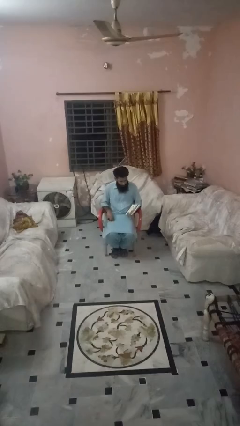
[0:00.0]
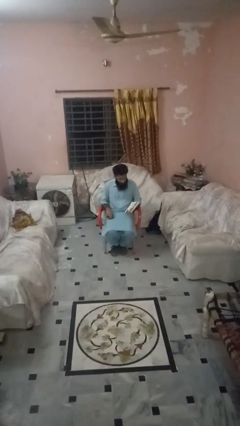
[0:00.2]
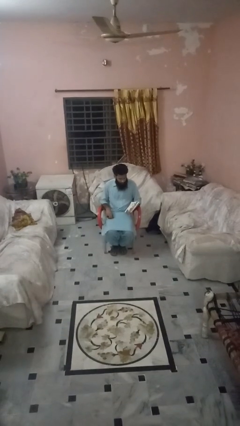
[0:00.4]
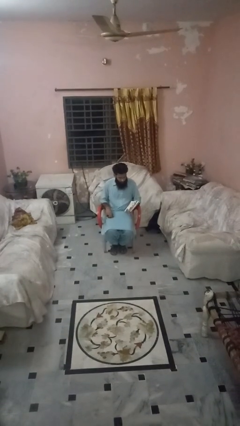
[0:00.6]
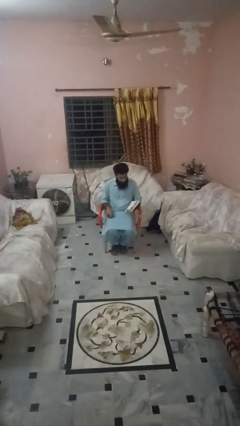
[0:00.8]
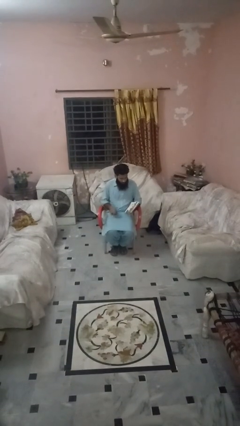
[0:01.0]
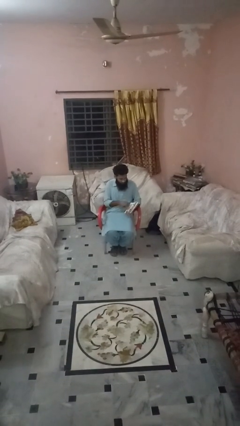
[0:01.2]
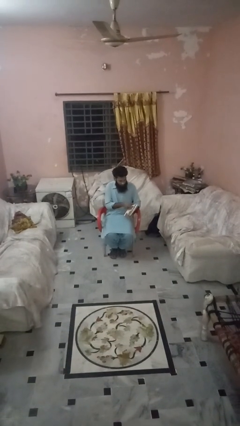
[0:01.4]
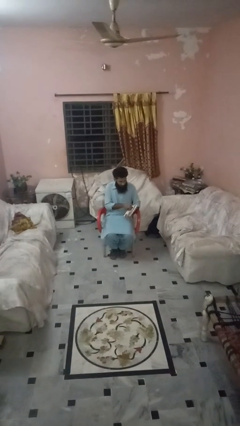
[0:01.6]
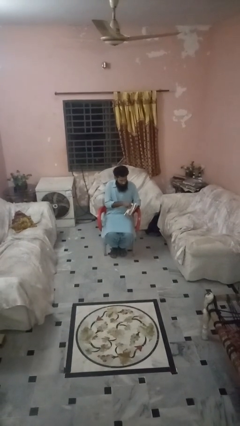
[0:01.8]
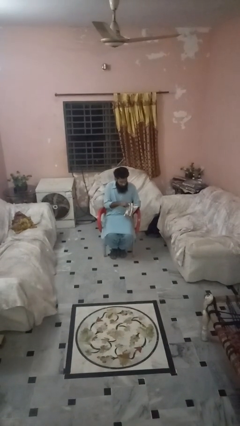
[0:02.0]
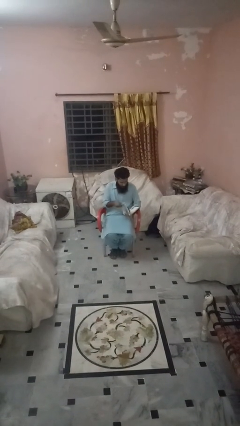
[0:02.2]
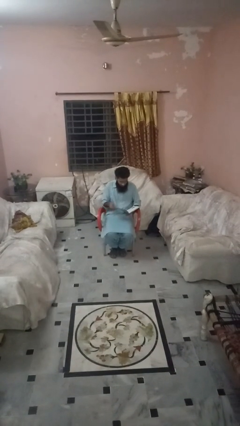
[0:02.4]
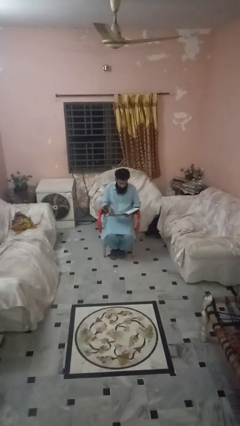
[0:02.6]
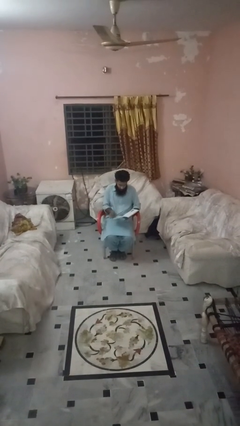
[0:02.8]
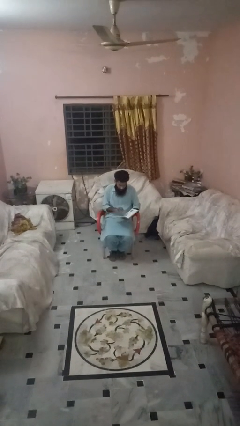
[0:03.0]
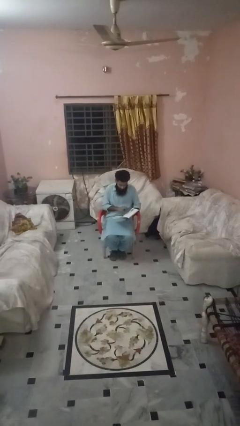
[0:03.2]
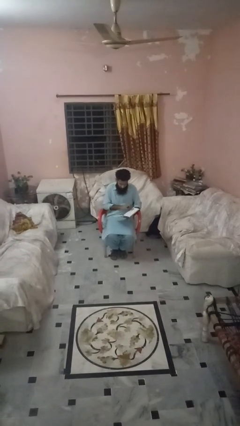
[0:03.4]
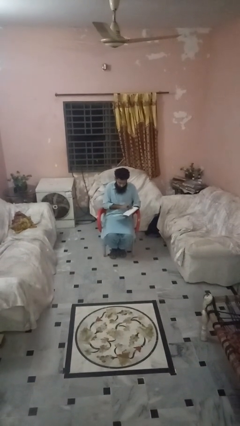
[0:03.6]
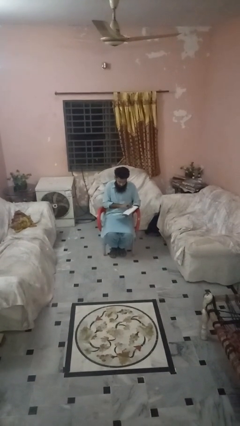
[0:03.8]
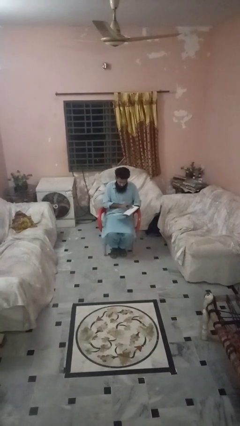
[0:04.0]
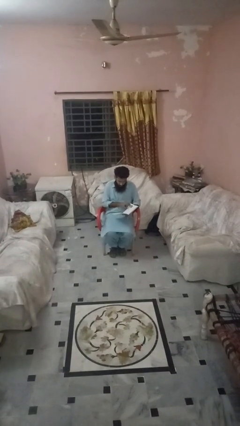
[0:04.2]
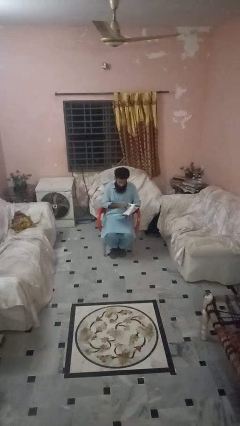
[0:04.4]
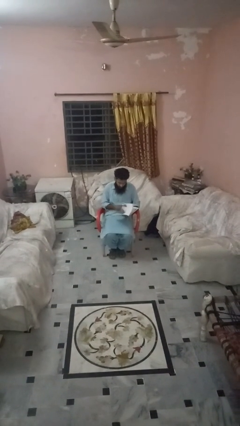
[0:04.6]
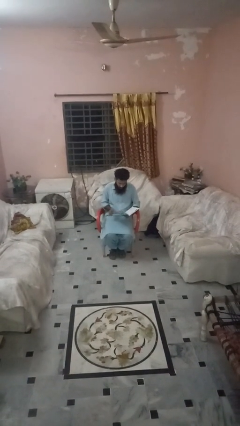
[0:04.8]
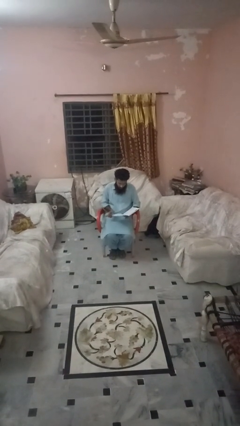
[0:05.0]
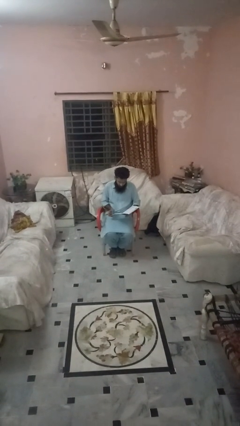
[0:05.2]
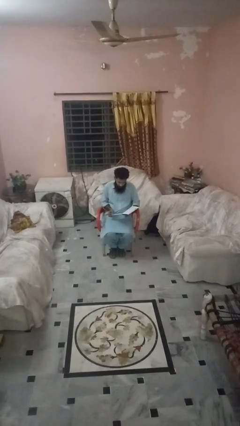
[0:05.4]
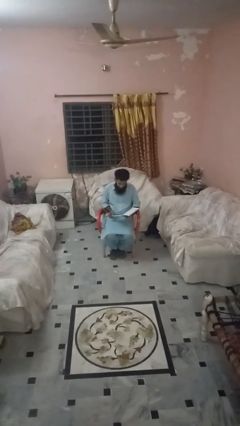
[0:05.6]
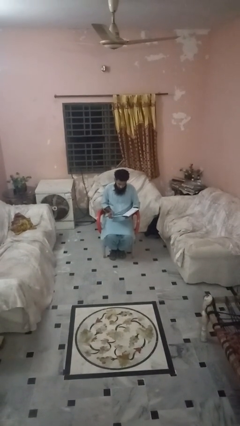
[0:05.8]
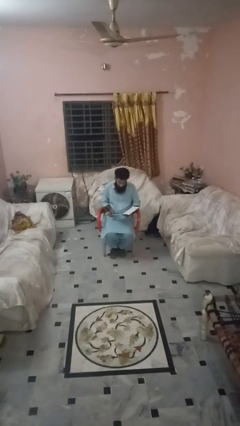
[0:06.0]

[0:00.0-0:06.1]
person reads magazine

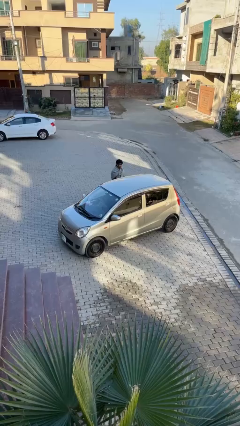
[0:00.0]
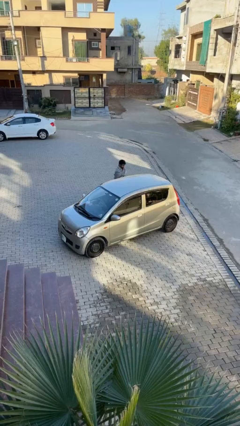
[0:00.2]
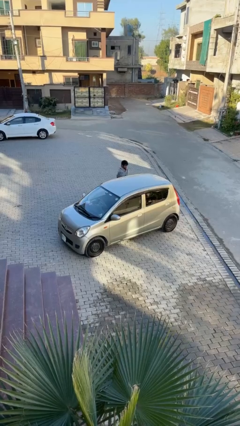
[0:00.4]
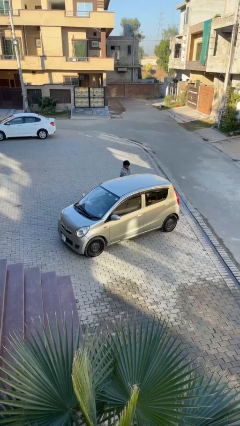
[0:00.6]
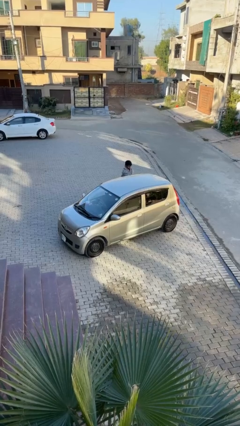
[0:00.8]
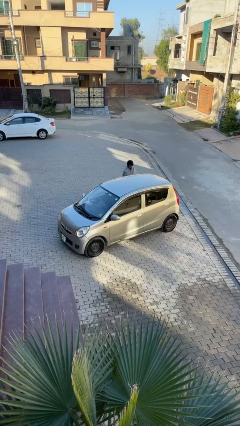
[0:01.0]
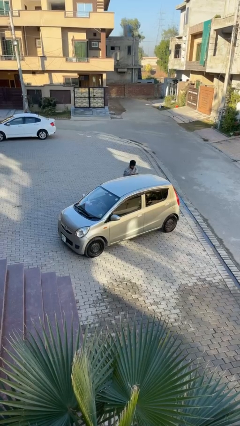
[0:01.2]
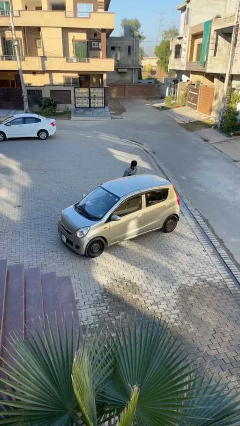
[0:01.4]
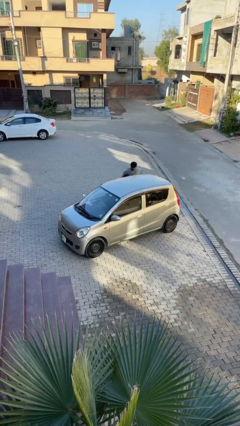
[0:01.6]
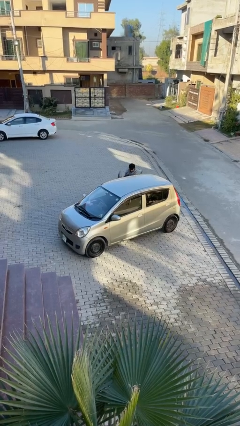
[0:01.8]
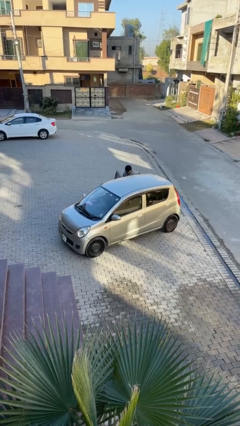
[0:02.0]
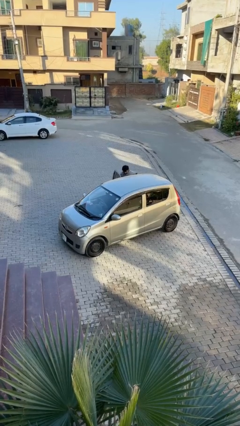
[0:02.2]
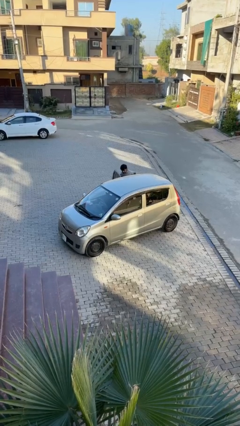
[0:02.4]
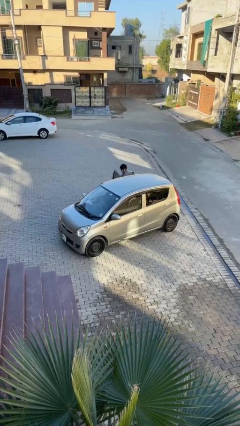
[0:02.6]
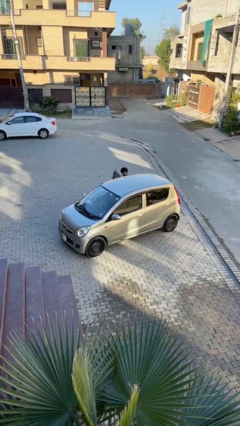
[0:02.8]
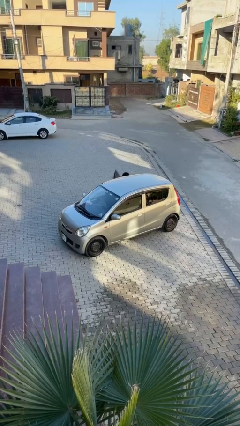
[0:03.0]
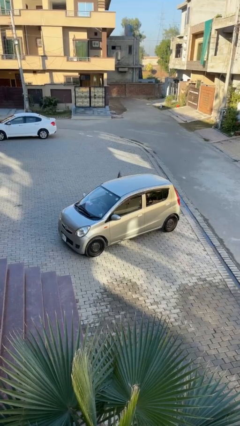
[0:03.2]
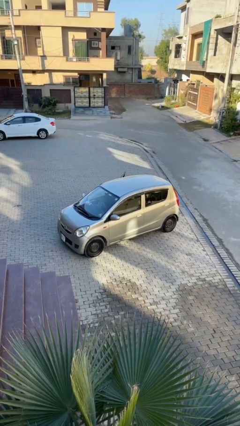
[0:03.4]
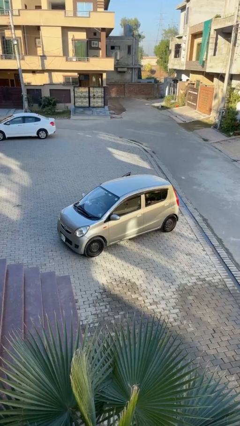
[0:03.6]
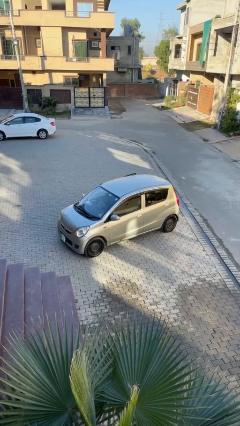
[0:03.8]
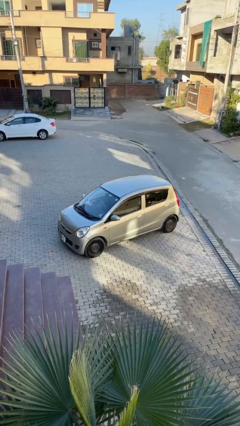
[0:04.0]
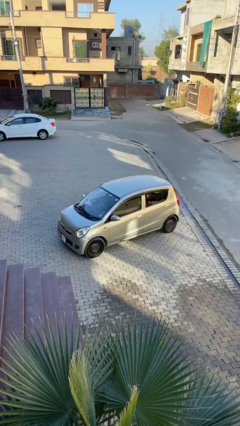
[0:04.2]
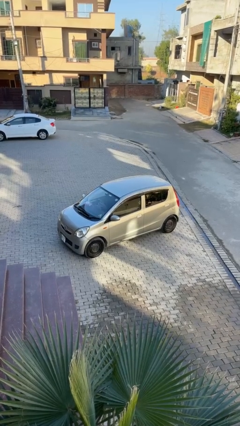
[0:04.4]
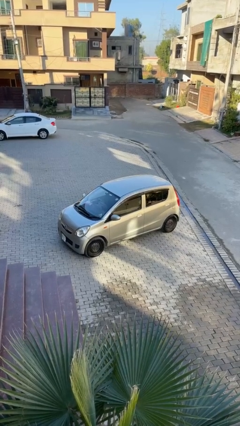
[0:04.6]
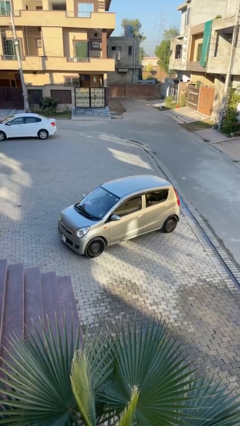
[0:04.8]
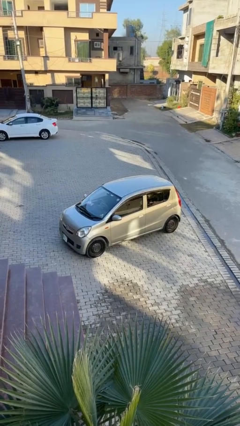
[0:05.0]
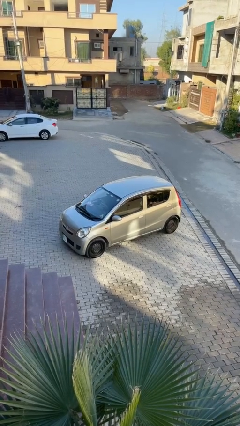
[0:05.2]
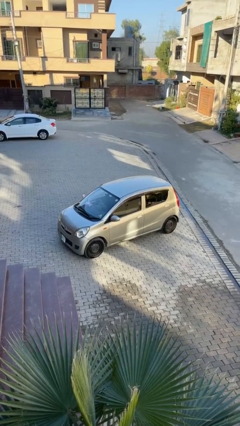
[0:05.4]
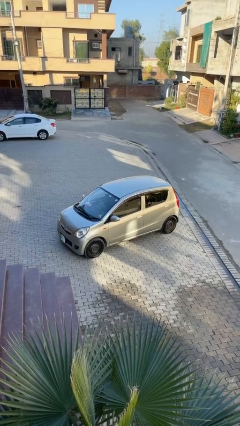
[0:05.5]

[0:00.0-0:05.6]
car picks up person

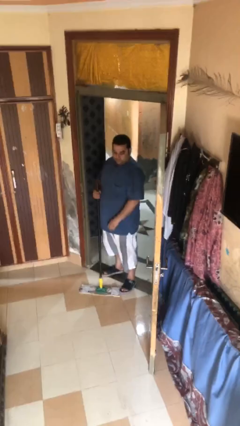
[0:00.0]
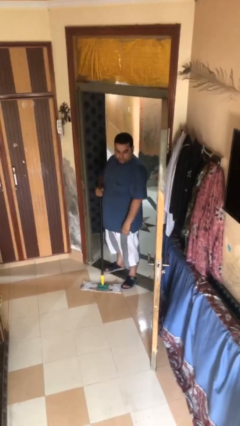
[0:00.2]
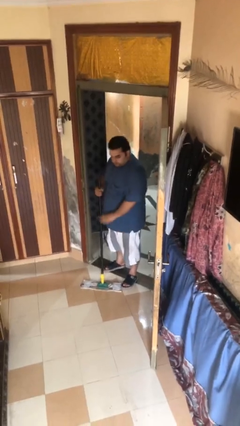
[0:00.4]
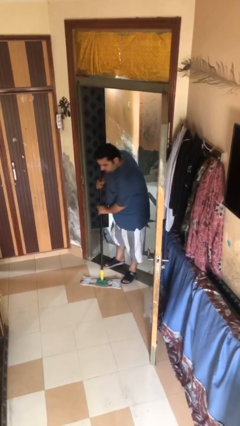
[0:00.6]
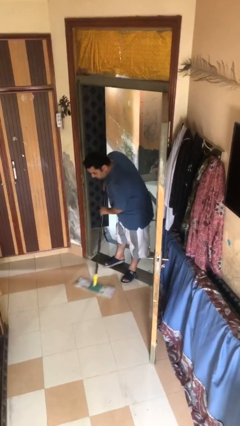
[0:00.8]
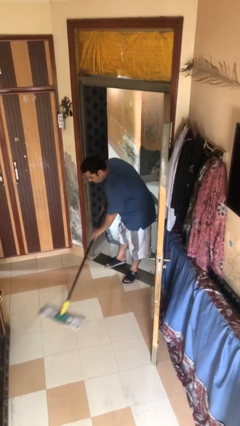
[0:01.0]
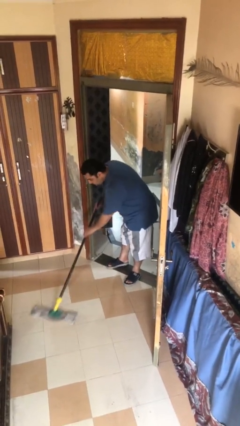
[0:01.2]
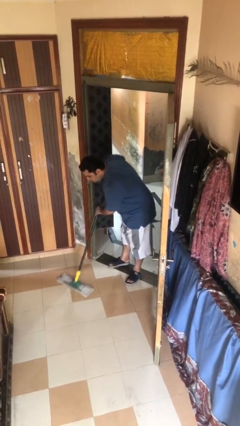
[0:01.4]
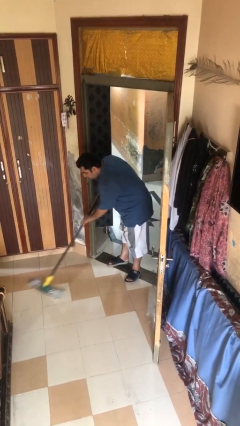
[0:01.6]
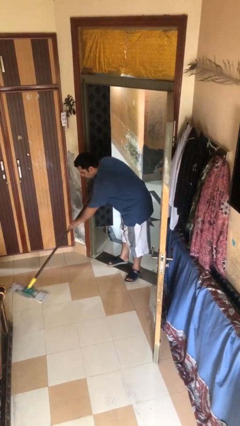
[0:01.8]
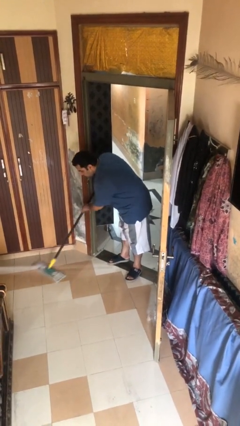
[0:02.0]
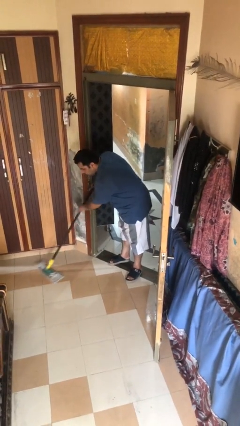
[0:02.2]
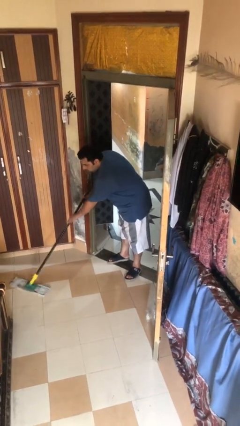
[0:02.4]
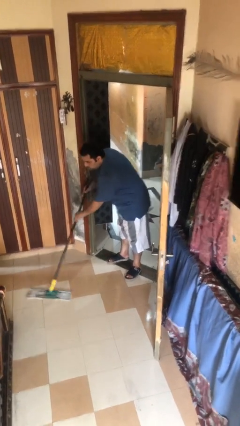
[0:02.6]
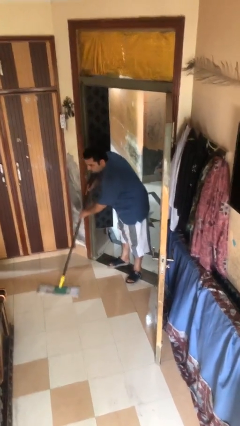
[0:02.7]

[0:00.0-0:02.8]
person mops

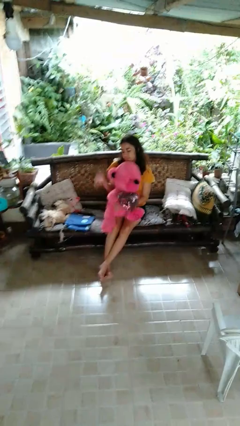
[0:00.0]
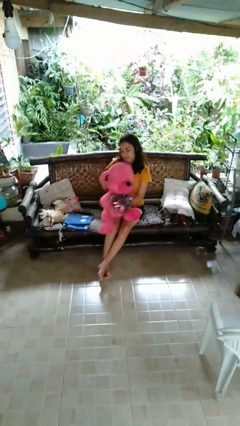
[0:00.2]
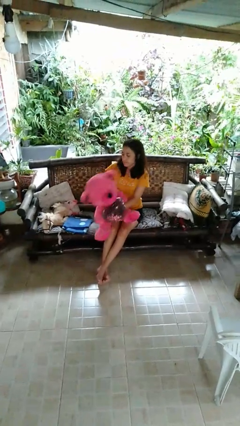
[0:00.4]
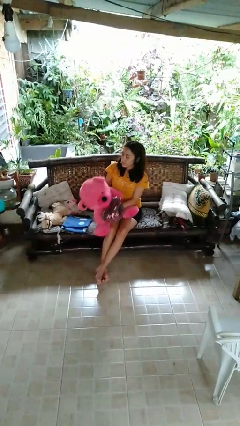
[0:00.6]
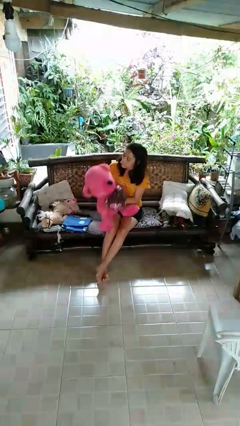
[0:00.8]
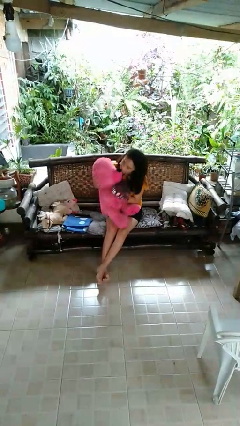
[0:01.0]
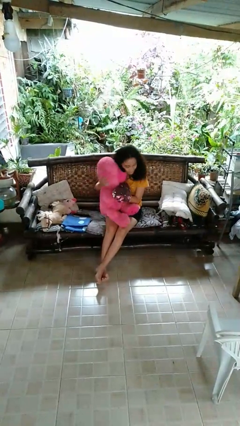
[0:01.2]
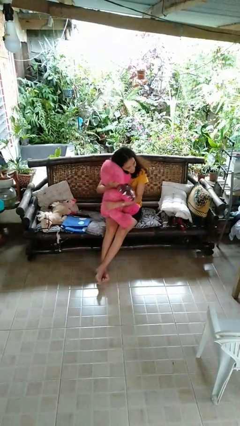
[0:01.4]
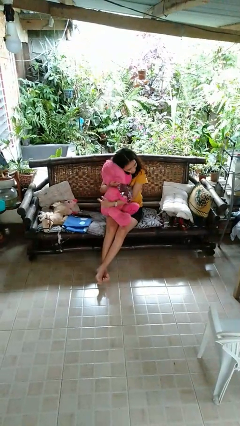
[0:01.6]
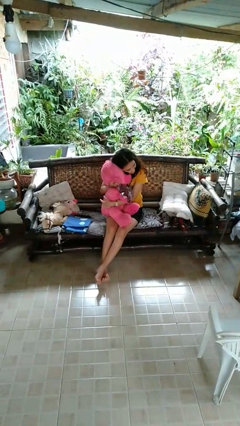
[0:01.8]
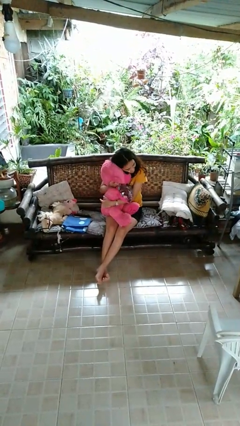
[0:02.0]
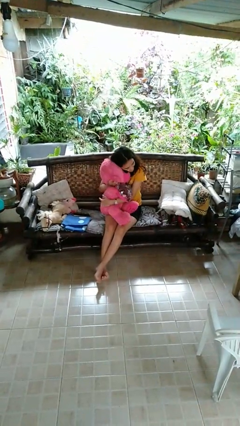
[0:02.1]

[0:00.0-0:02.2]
person hugs stuffed animal

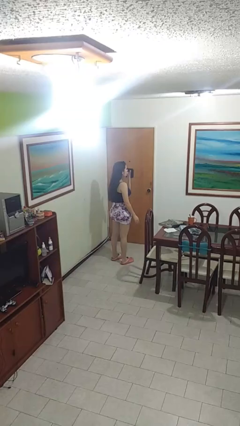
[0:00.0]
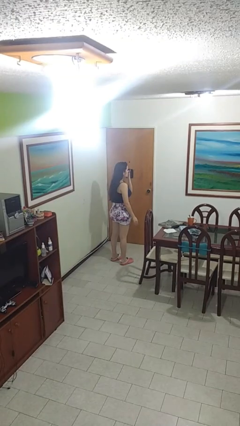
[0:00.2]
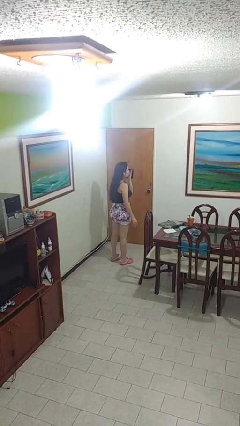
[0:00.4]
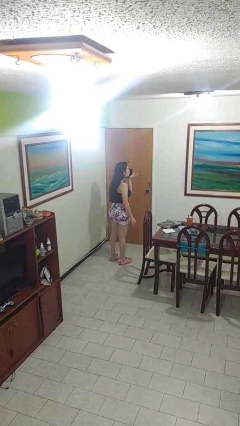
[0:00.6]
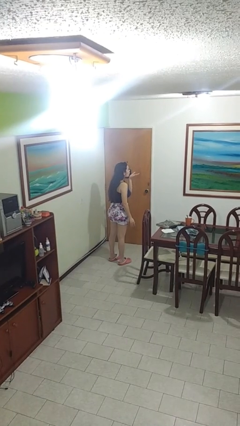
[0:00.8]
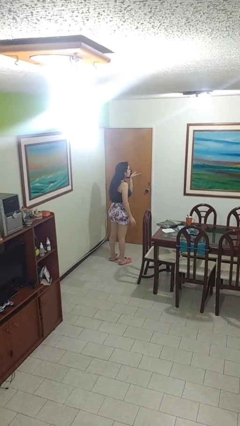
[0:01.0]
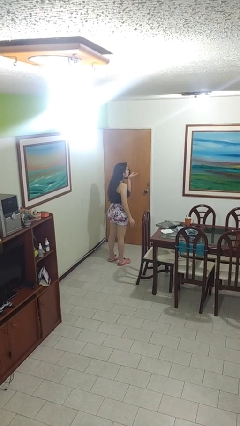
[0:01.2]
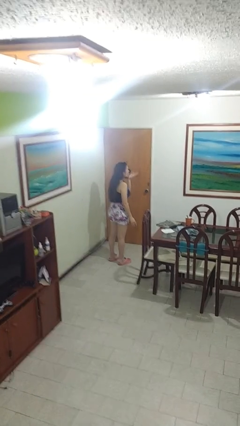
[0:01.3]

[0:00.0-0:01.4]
person gestures blow kiss
